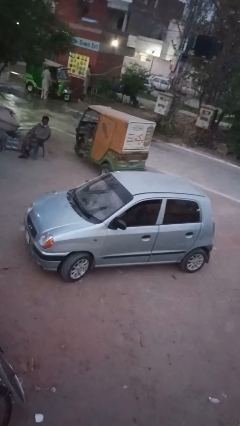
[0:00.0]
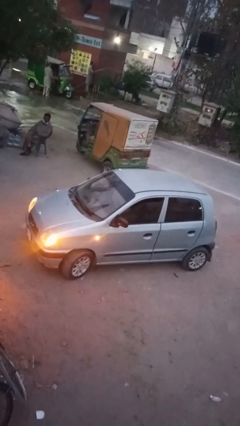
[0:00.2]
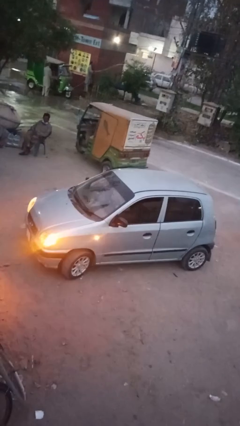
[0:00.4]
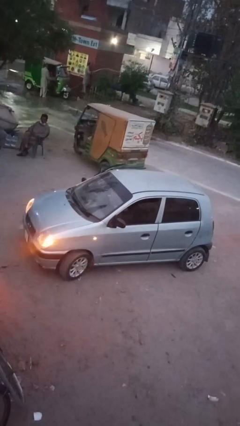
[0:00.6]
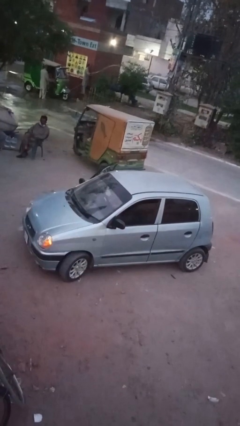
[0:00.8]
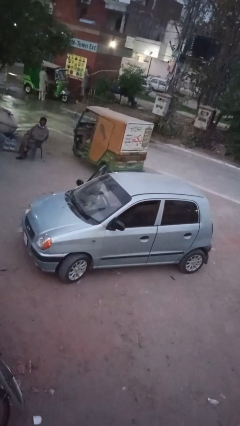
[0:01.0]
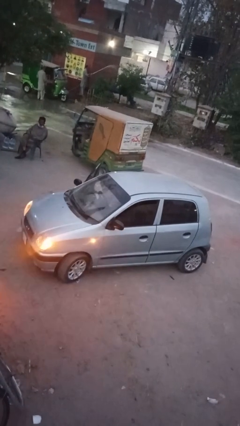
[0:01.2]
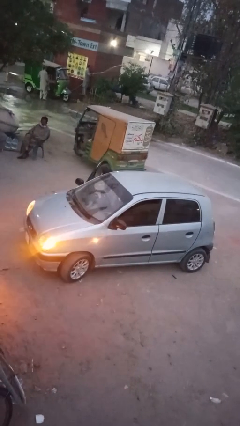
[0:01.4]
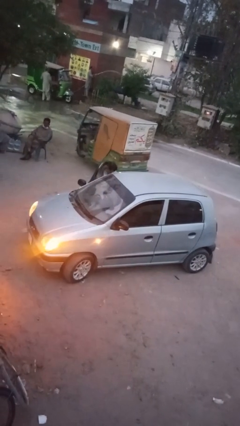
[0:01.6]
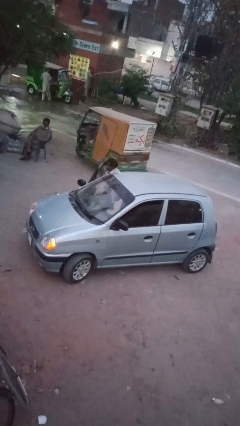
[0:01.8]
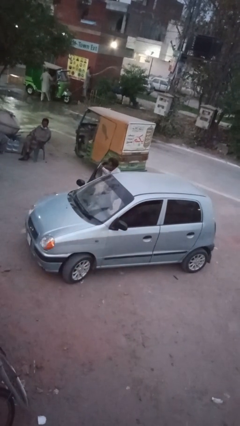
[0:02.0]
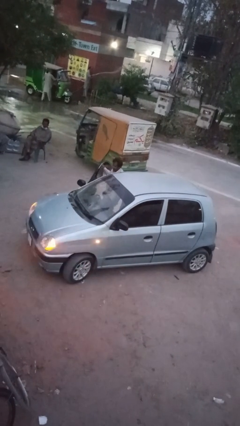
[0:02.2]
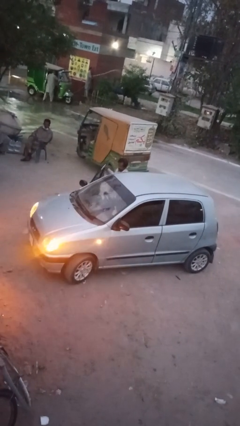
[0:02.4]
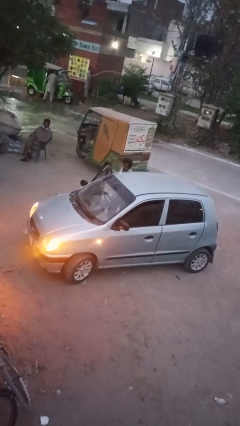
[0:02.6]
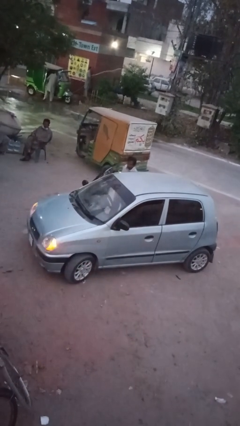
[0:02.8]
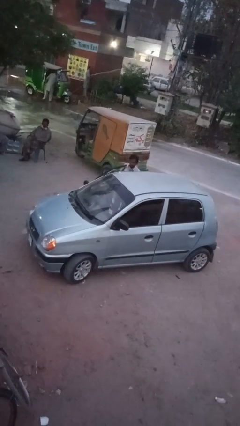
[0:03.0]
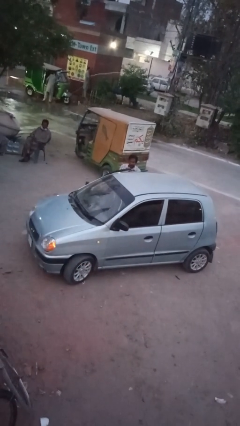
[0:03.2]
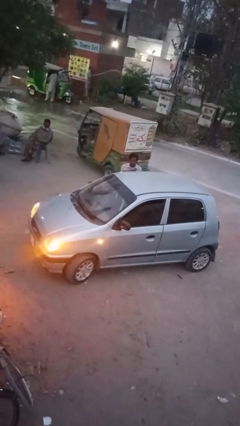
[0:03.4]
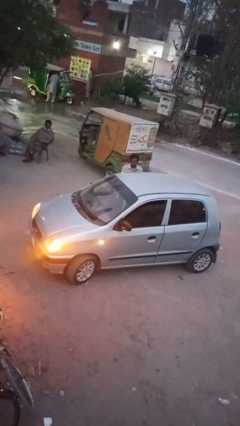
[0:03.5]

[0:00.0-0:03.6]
car drops off person

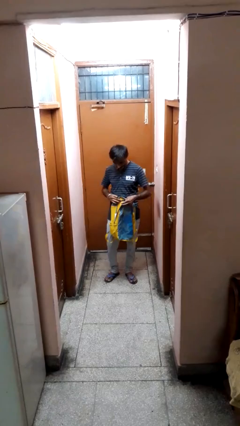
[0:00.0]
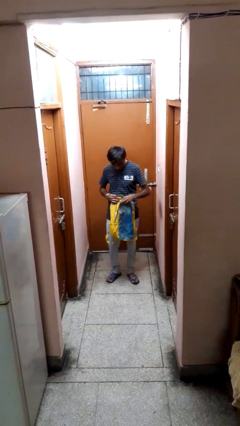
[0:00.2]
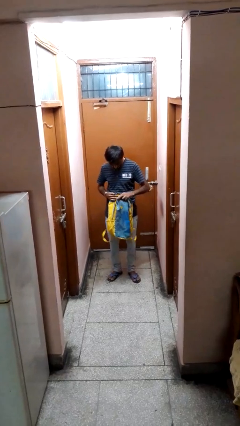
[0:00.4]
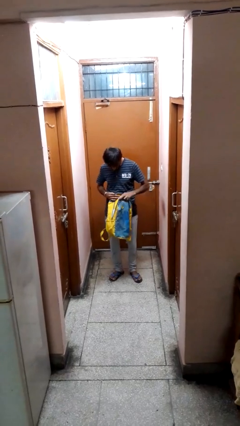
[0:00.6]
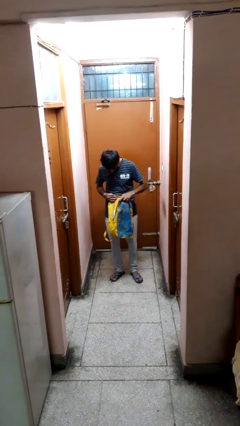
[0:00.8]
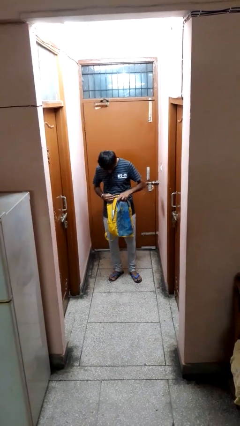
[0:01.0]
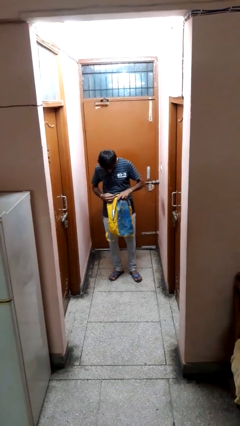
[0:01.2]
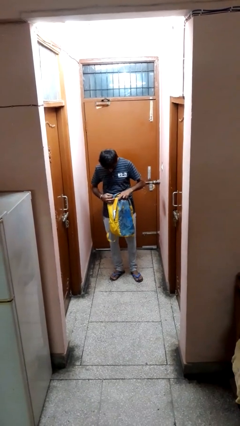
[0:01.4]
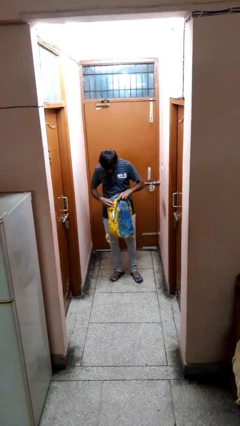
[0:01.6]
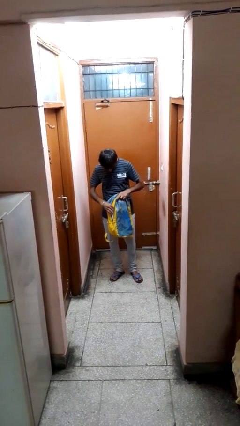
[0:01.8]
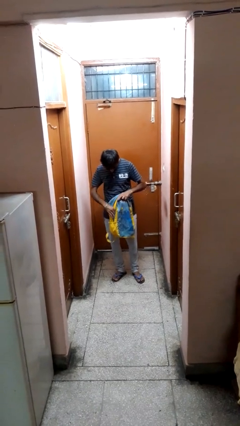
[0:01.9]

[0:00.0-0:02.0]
person searches in backpack

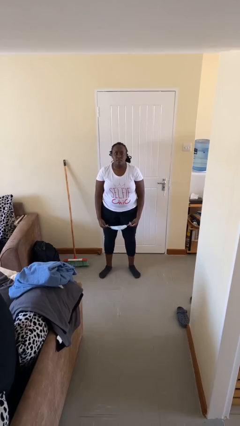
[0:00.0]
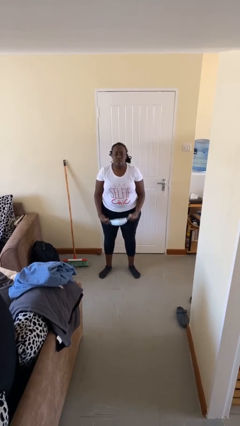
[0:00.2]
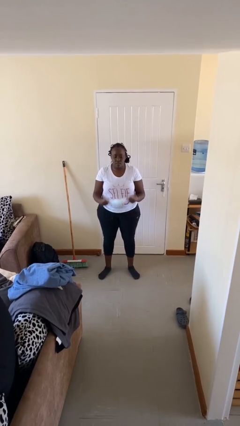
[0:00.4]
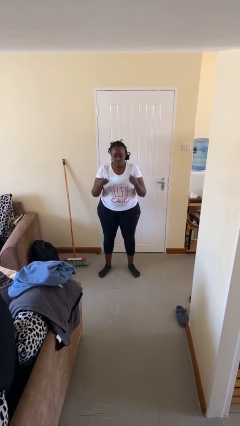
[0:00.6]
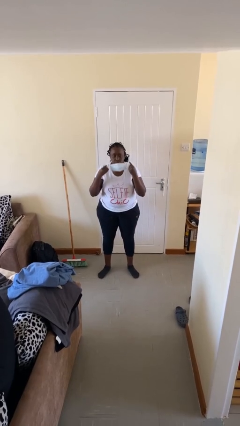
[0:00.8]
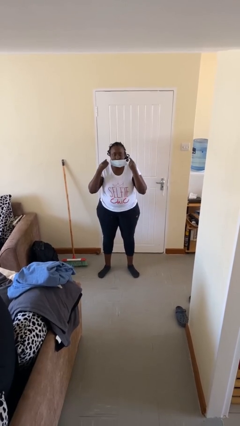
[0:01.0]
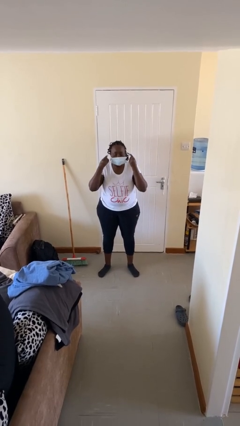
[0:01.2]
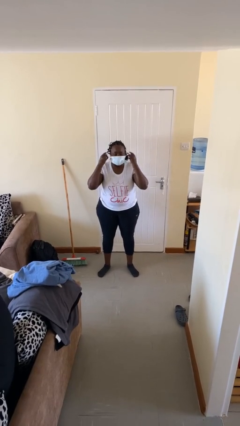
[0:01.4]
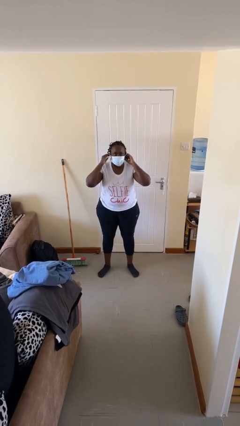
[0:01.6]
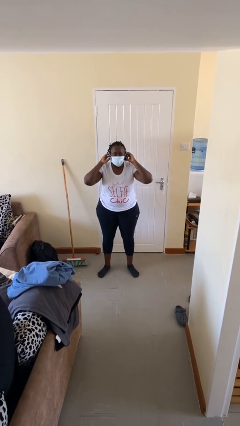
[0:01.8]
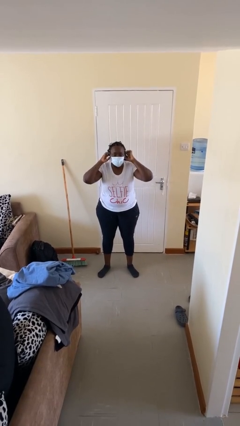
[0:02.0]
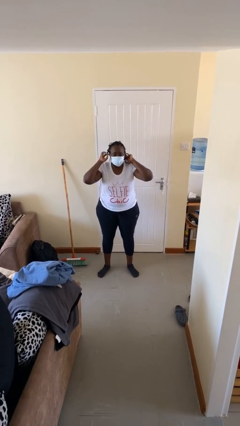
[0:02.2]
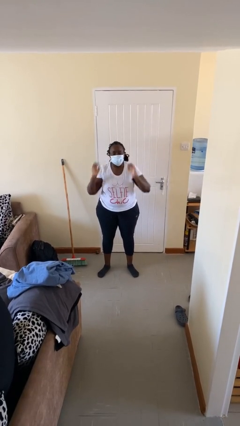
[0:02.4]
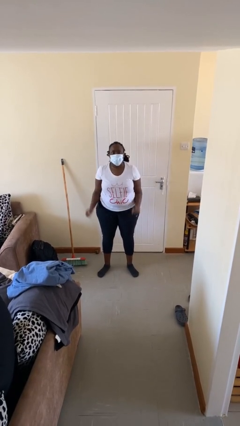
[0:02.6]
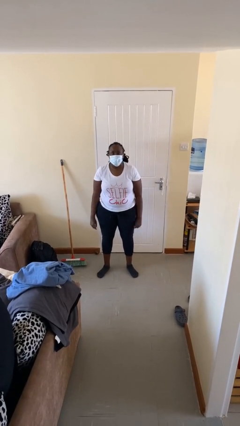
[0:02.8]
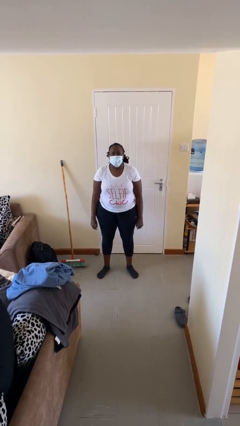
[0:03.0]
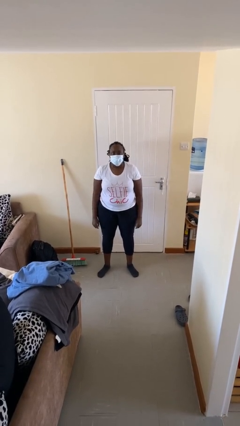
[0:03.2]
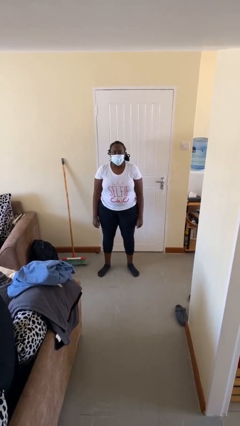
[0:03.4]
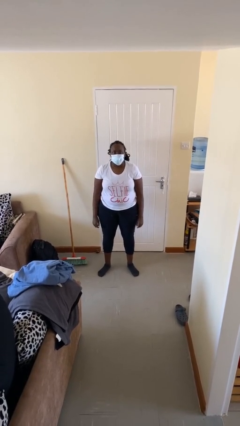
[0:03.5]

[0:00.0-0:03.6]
person puts on facemask

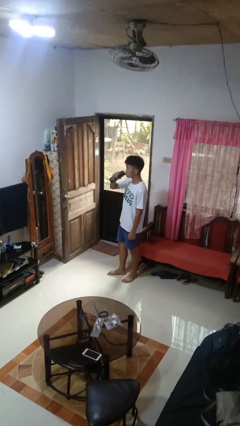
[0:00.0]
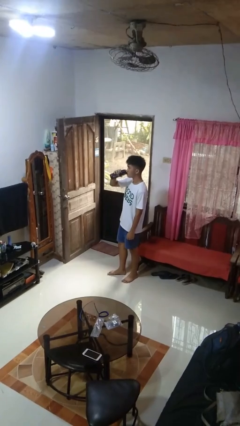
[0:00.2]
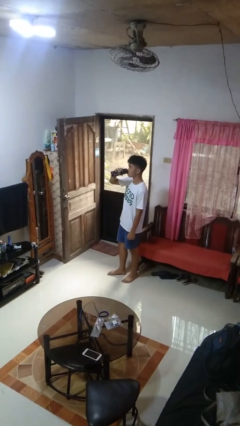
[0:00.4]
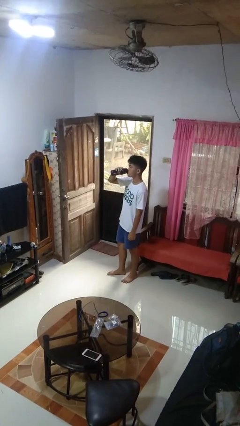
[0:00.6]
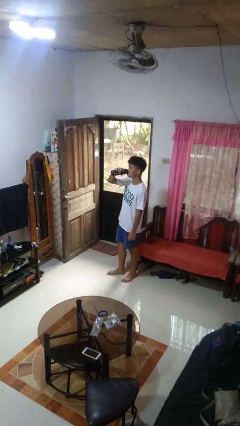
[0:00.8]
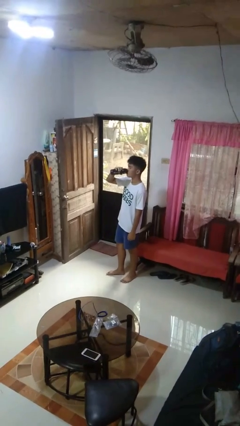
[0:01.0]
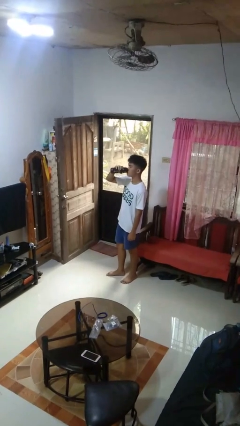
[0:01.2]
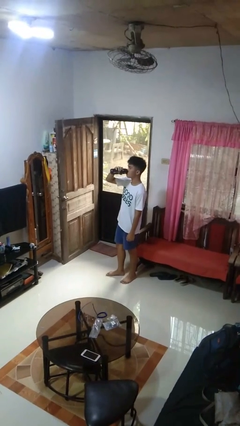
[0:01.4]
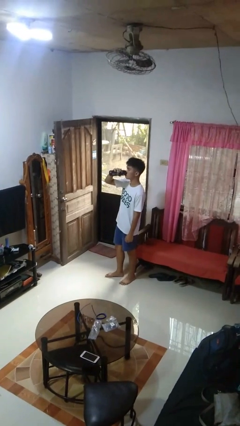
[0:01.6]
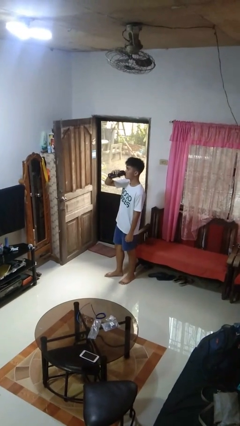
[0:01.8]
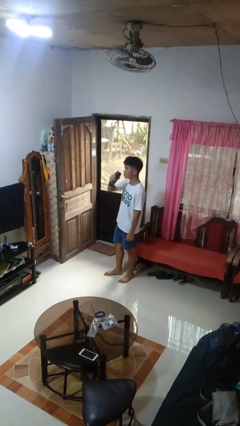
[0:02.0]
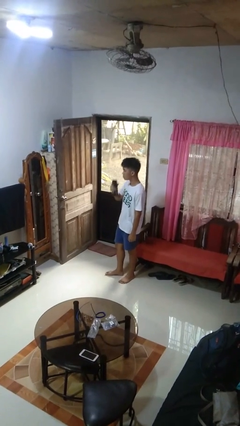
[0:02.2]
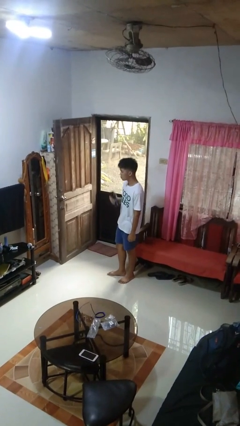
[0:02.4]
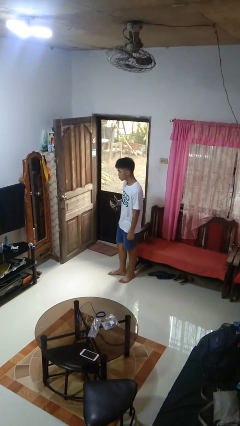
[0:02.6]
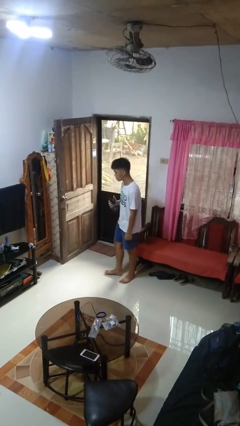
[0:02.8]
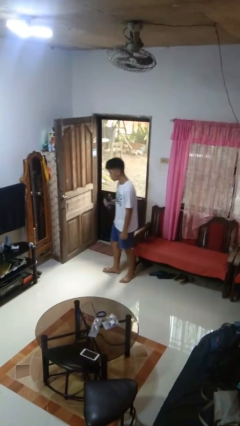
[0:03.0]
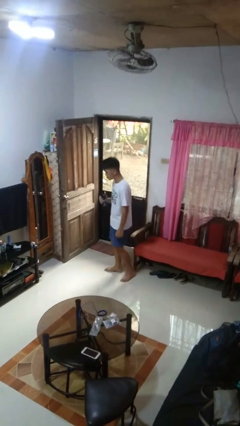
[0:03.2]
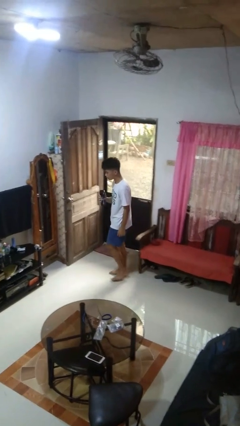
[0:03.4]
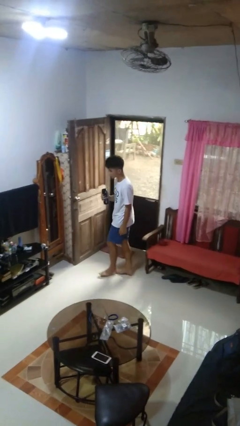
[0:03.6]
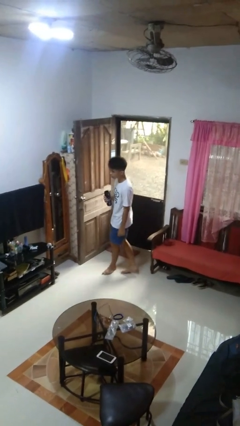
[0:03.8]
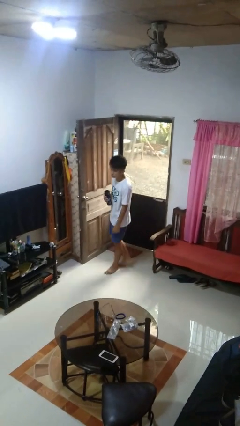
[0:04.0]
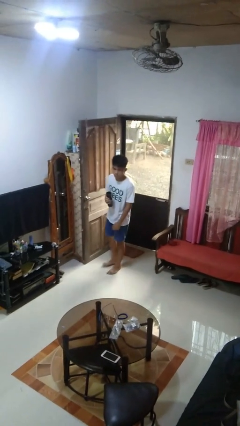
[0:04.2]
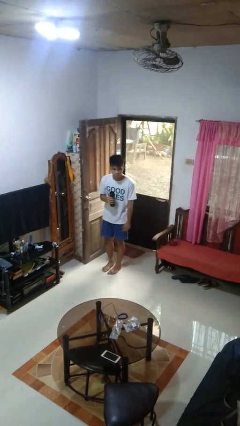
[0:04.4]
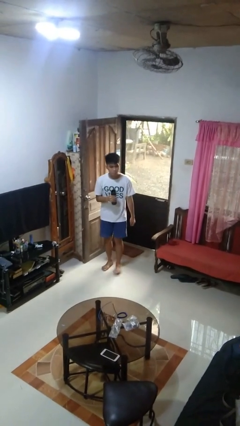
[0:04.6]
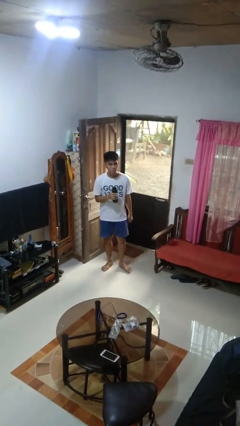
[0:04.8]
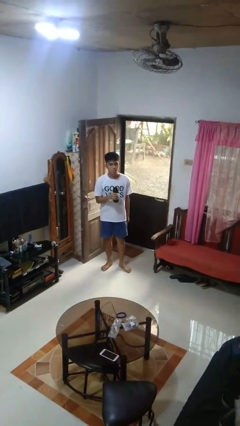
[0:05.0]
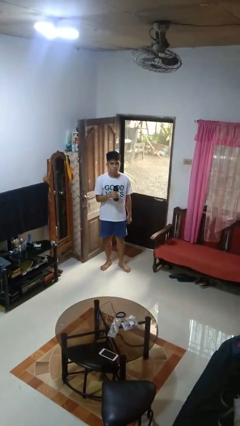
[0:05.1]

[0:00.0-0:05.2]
person drinks from bottle

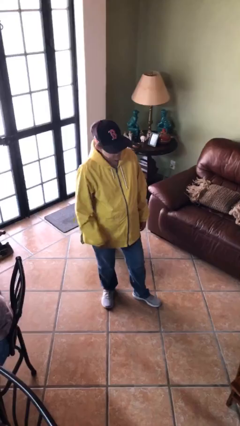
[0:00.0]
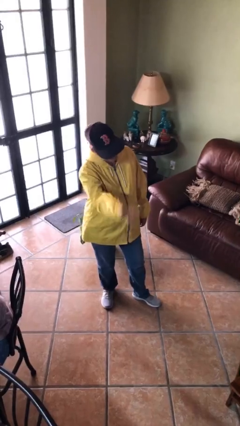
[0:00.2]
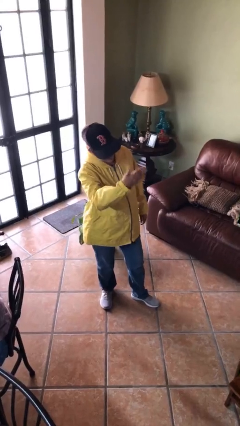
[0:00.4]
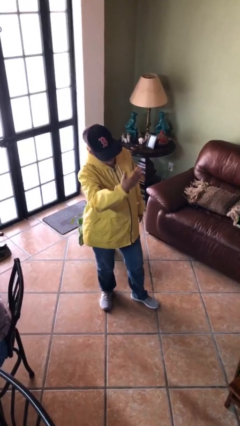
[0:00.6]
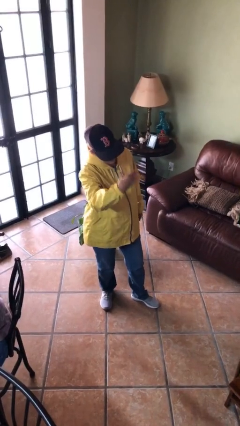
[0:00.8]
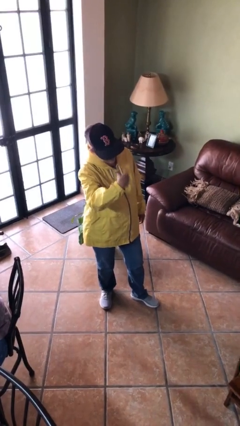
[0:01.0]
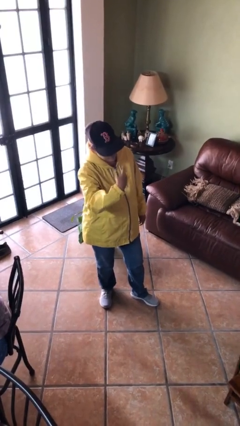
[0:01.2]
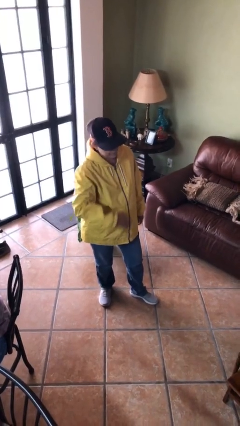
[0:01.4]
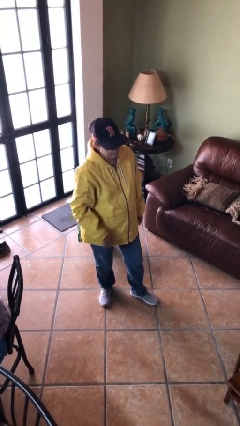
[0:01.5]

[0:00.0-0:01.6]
person gestures come here

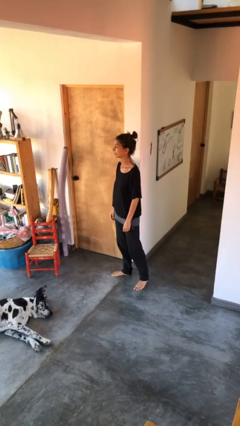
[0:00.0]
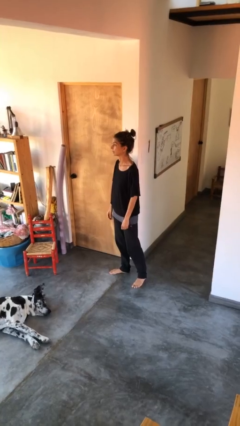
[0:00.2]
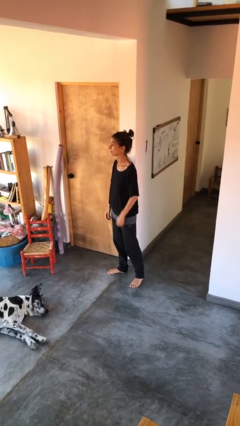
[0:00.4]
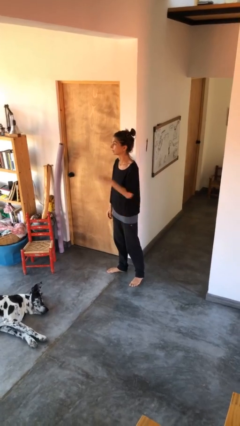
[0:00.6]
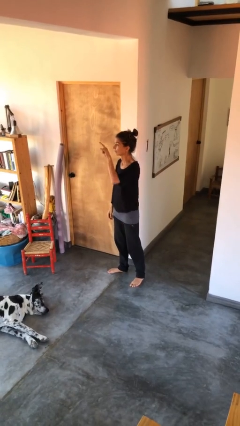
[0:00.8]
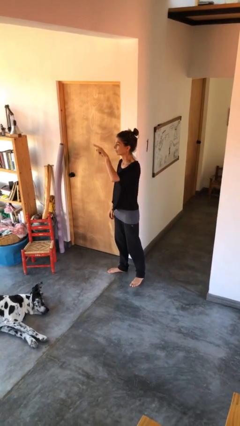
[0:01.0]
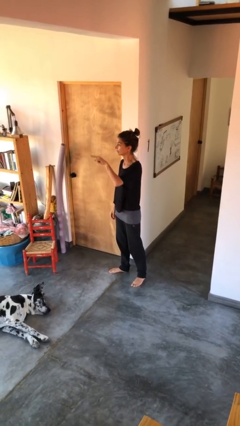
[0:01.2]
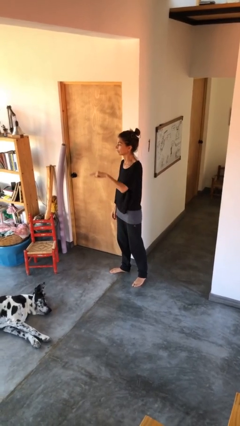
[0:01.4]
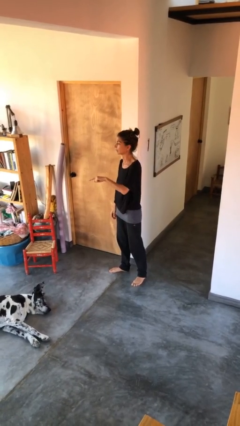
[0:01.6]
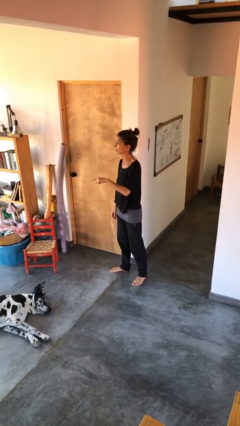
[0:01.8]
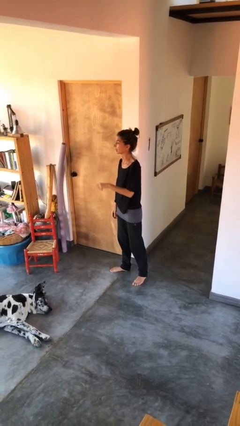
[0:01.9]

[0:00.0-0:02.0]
person gestures swipe down
